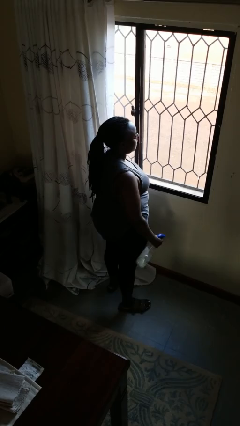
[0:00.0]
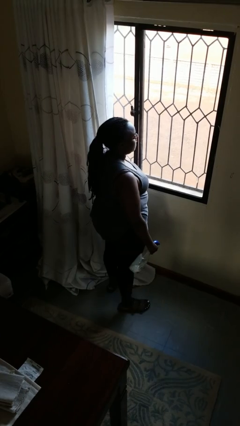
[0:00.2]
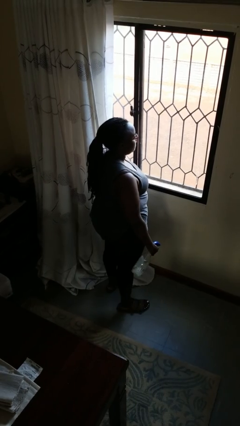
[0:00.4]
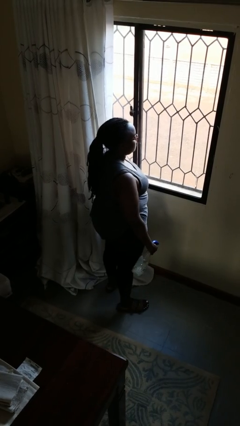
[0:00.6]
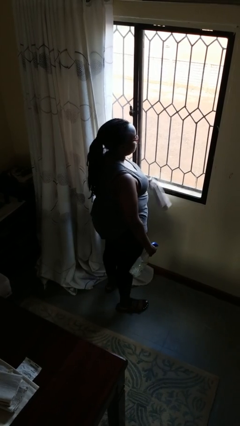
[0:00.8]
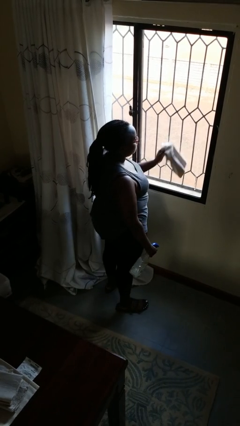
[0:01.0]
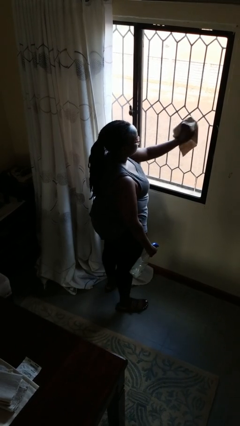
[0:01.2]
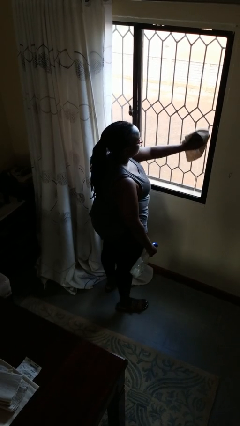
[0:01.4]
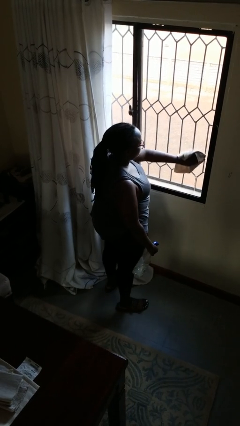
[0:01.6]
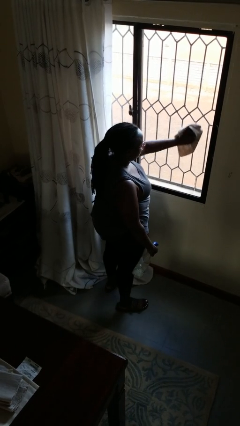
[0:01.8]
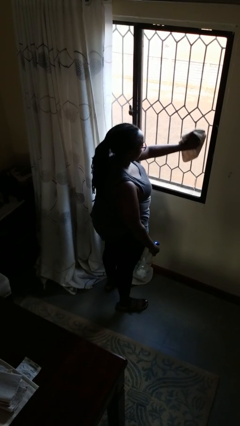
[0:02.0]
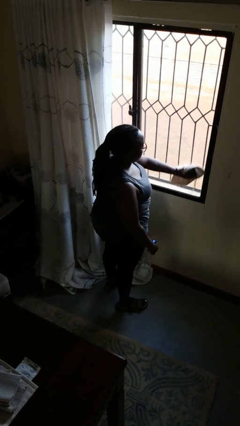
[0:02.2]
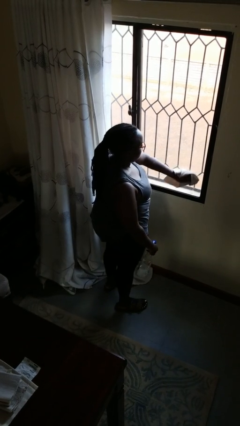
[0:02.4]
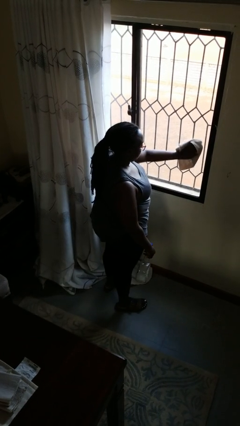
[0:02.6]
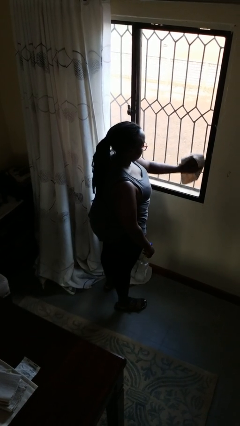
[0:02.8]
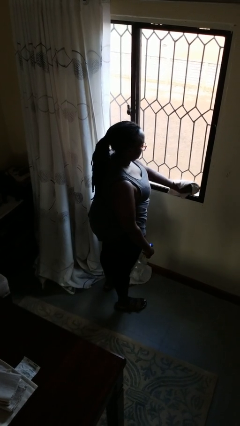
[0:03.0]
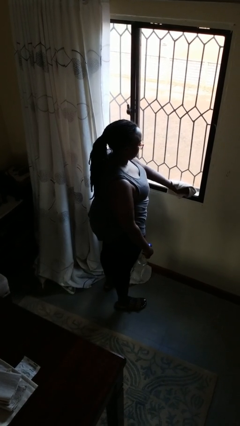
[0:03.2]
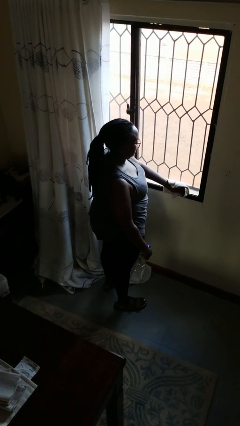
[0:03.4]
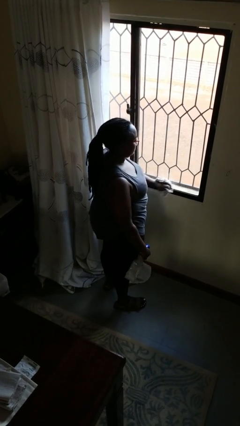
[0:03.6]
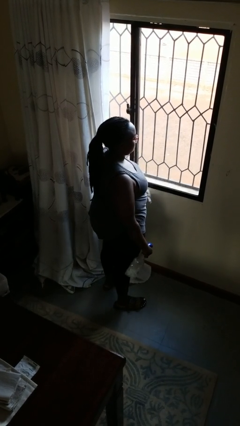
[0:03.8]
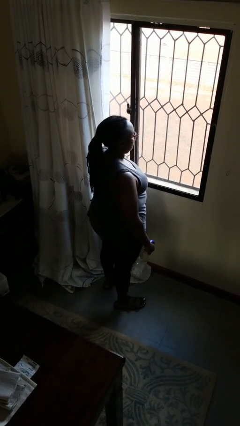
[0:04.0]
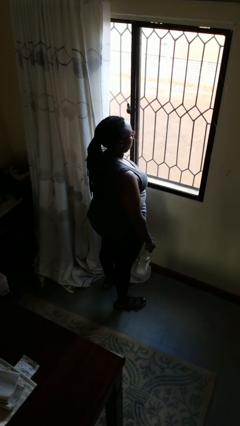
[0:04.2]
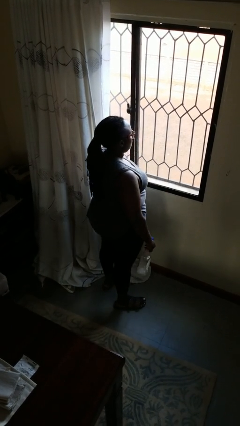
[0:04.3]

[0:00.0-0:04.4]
person washes window

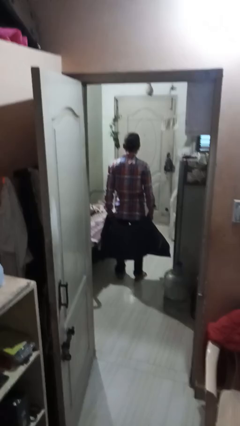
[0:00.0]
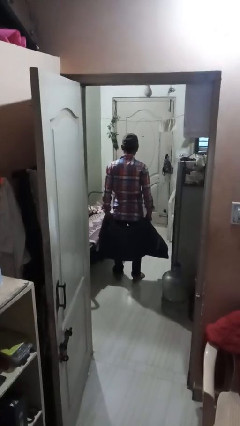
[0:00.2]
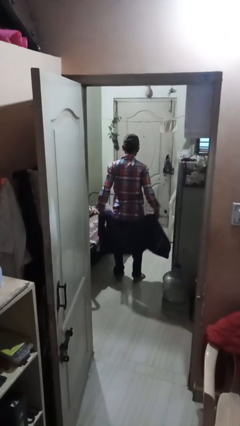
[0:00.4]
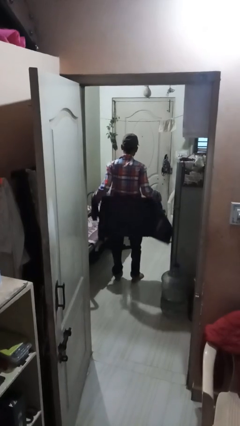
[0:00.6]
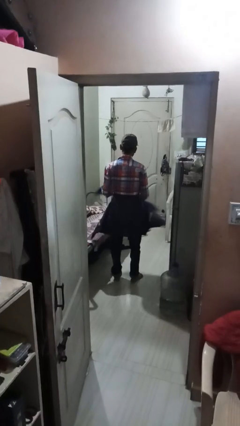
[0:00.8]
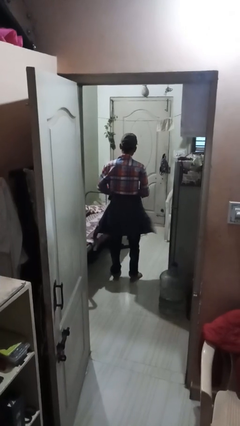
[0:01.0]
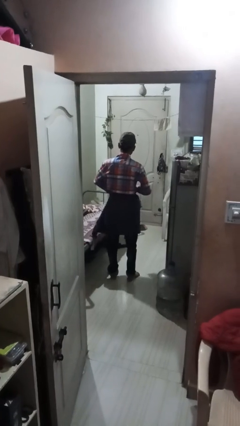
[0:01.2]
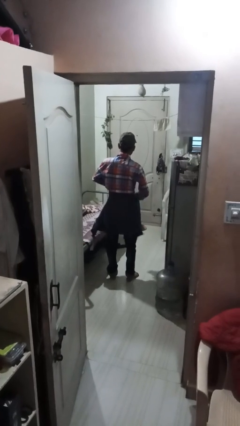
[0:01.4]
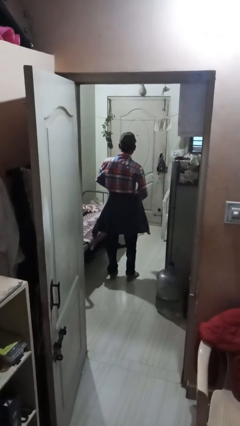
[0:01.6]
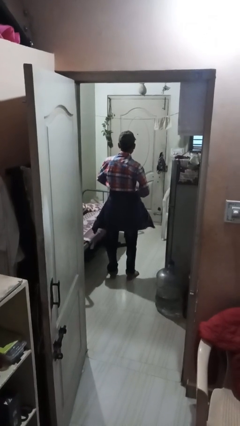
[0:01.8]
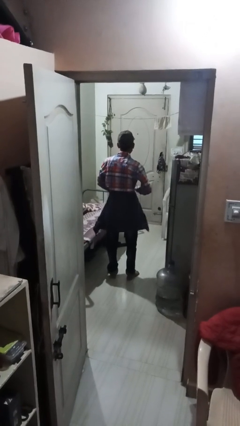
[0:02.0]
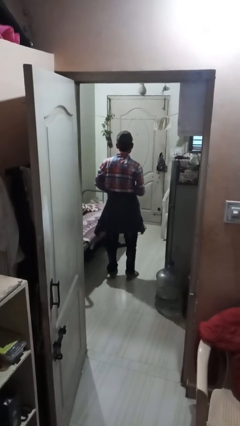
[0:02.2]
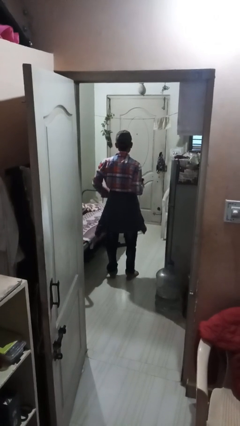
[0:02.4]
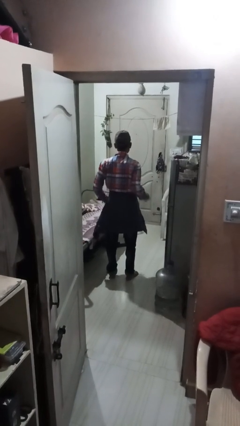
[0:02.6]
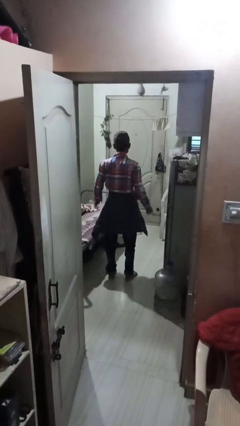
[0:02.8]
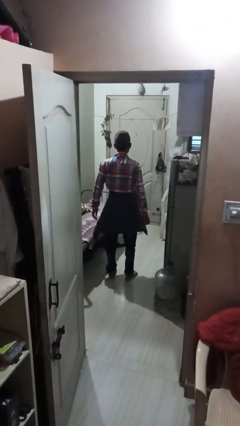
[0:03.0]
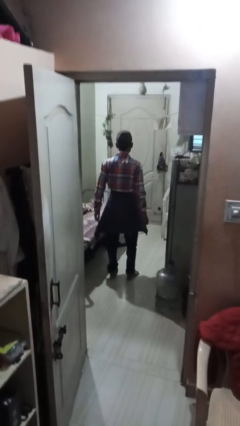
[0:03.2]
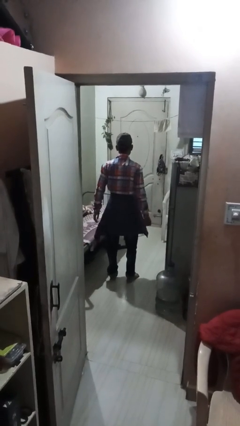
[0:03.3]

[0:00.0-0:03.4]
person ties jacket around waist

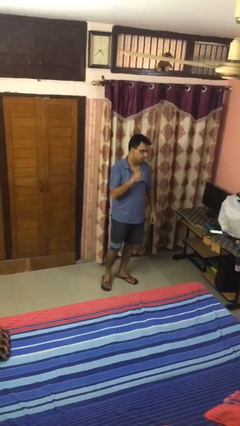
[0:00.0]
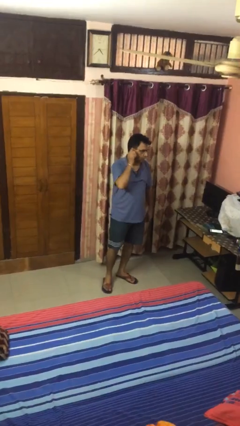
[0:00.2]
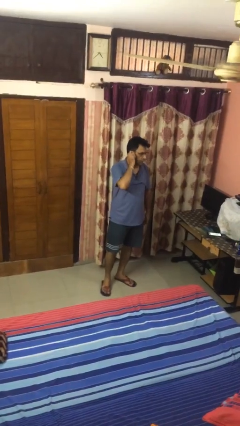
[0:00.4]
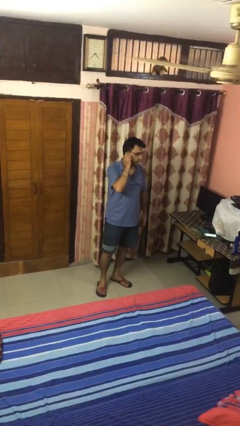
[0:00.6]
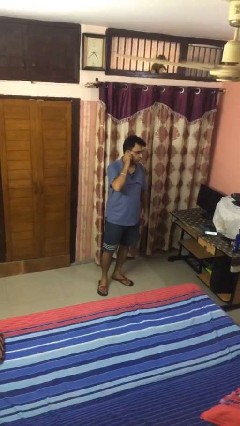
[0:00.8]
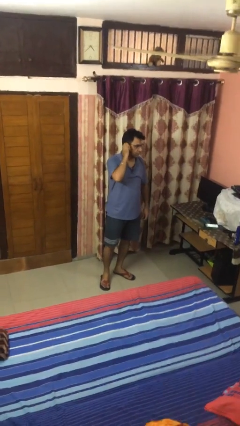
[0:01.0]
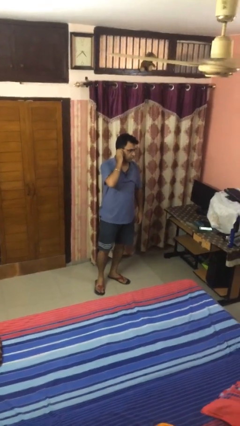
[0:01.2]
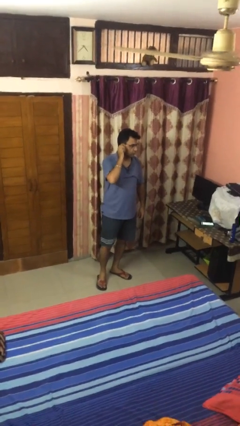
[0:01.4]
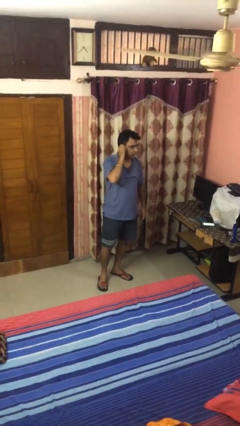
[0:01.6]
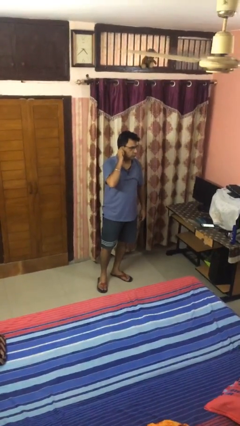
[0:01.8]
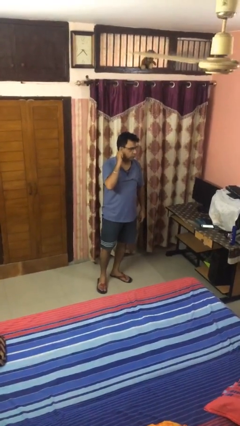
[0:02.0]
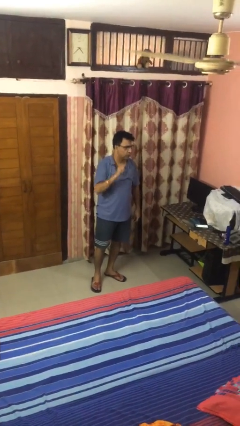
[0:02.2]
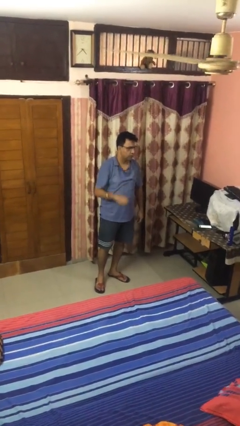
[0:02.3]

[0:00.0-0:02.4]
person touches earlobe

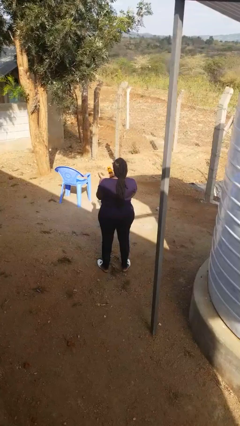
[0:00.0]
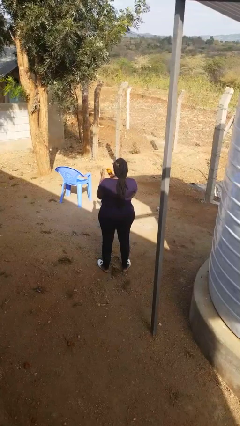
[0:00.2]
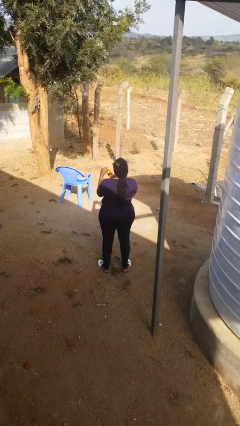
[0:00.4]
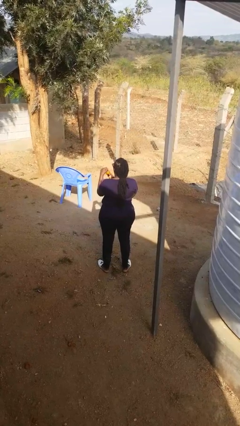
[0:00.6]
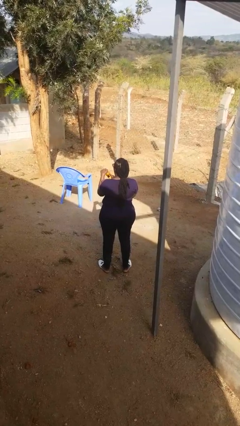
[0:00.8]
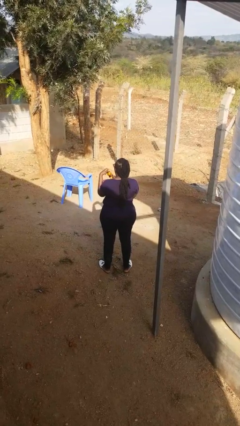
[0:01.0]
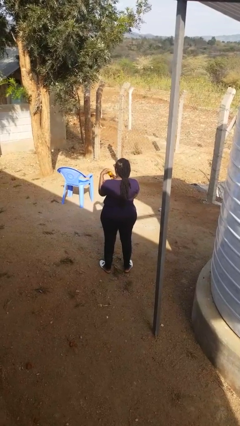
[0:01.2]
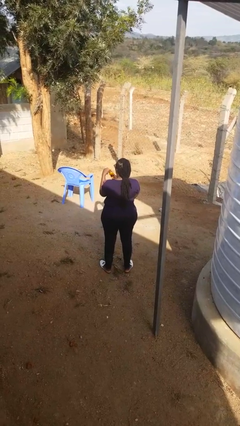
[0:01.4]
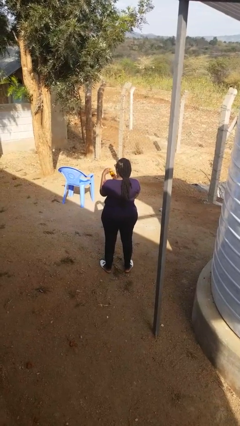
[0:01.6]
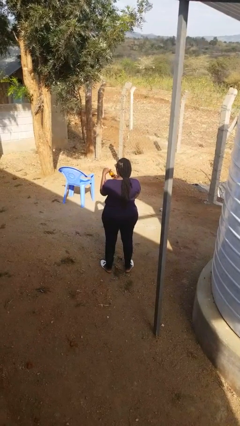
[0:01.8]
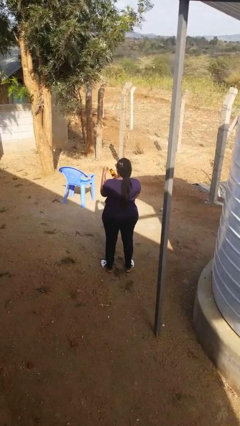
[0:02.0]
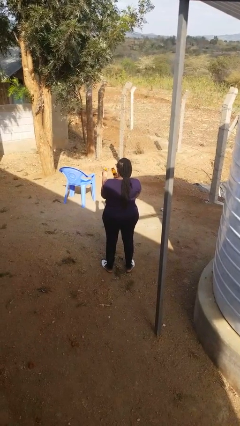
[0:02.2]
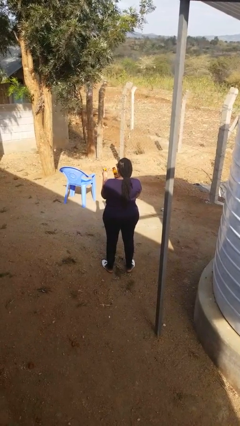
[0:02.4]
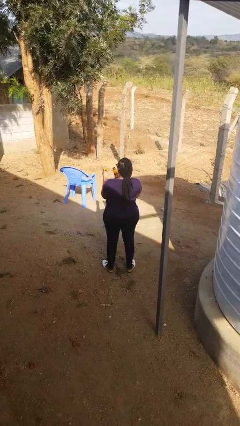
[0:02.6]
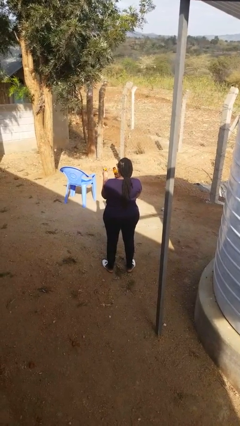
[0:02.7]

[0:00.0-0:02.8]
person opens jar

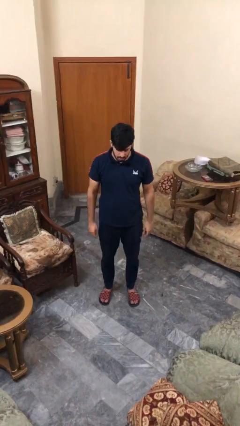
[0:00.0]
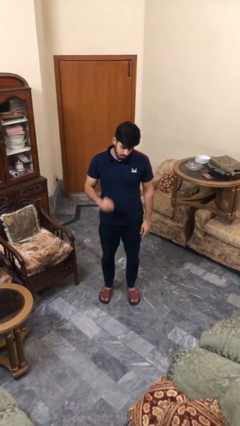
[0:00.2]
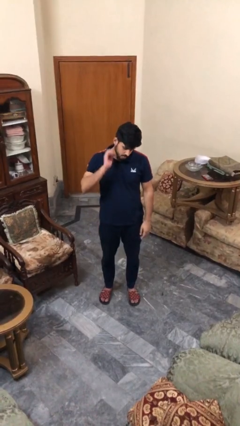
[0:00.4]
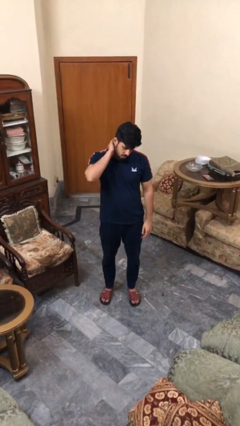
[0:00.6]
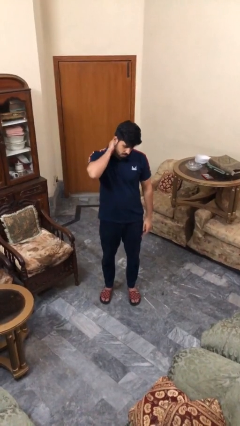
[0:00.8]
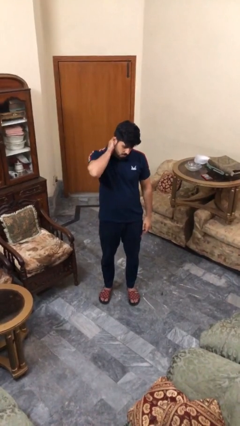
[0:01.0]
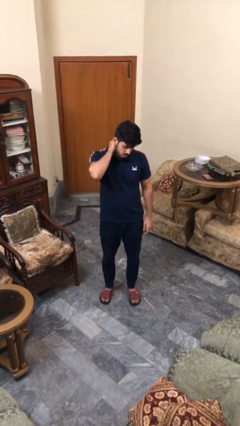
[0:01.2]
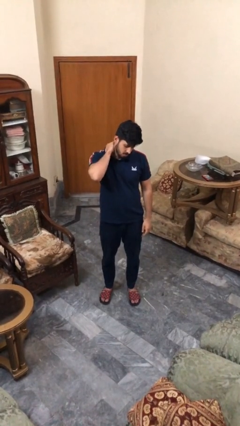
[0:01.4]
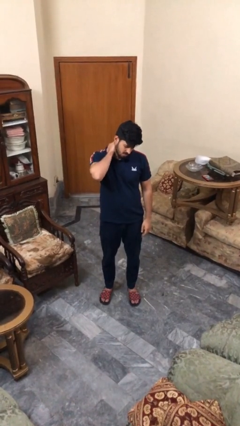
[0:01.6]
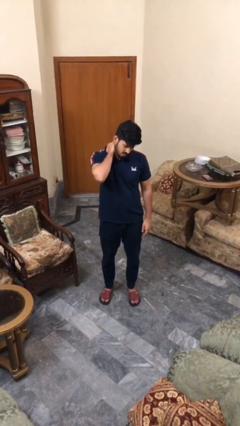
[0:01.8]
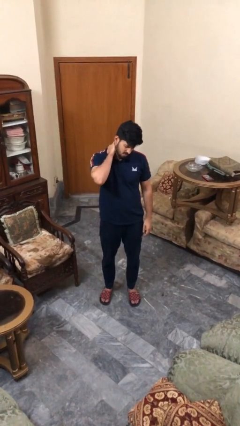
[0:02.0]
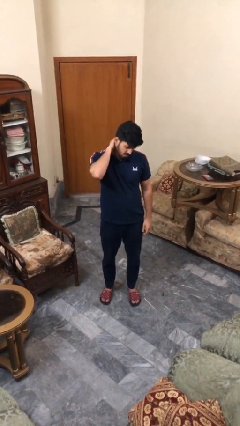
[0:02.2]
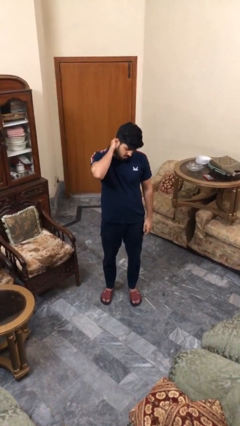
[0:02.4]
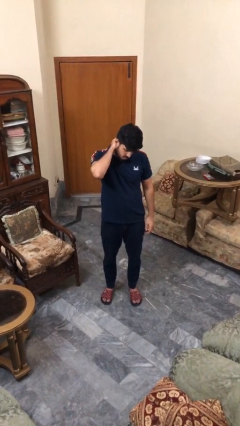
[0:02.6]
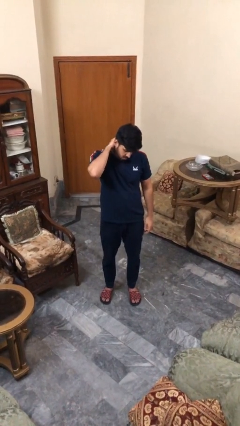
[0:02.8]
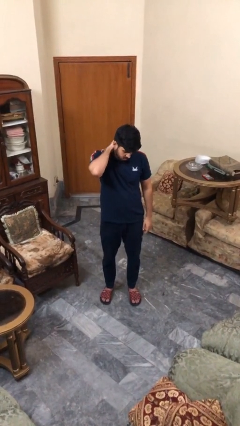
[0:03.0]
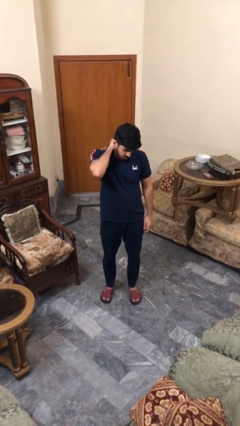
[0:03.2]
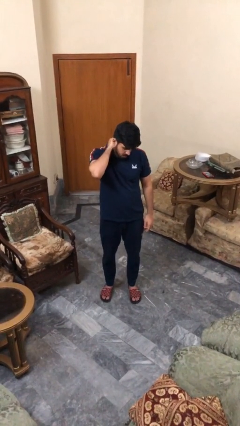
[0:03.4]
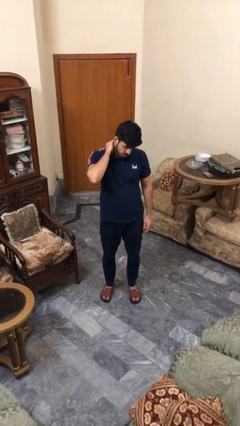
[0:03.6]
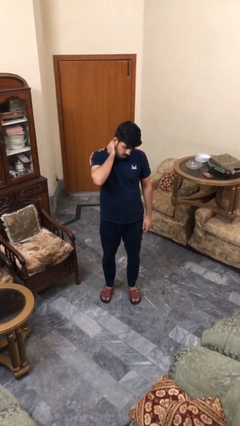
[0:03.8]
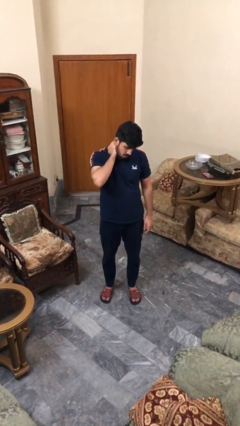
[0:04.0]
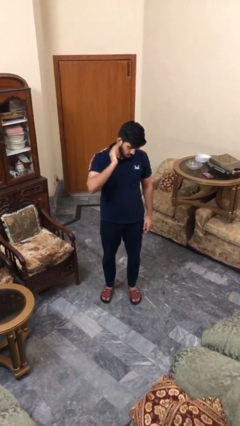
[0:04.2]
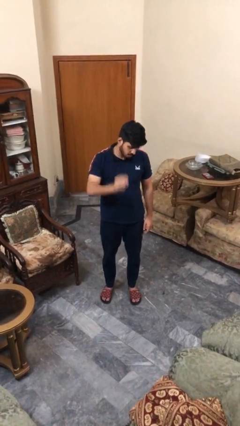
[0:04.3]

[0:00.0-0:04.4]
person rubs neck

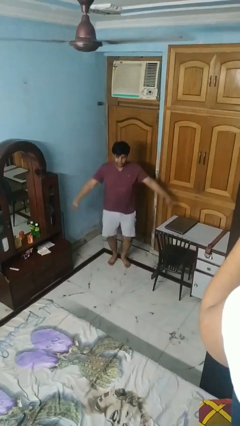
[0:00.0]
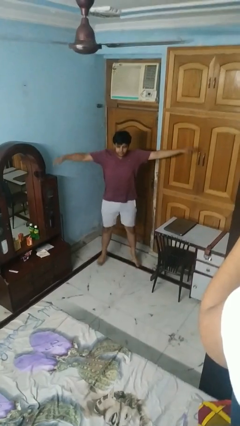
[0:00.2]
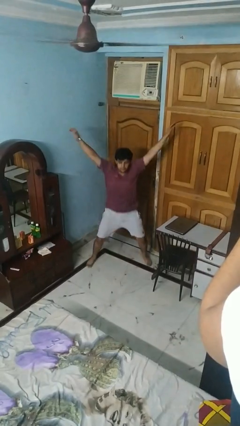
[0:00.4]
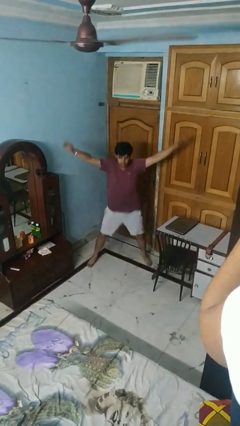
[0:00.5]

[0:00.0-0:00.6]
person exercises with jumping jacks
